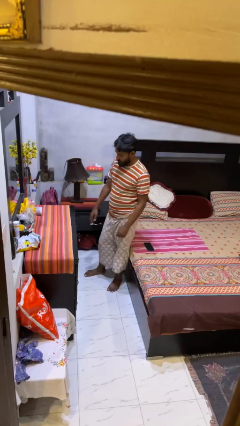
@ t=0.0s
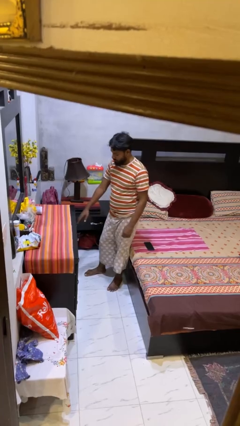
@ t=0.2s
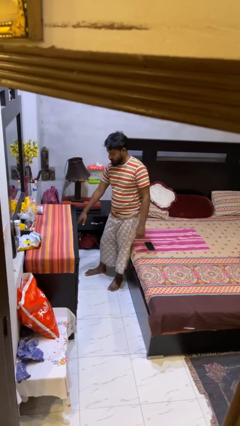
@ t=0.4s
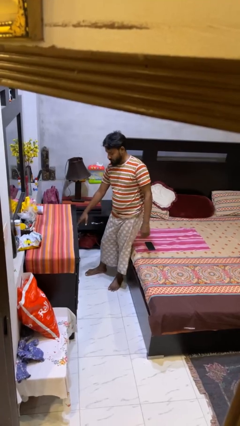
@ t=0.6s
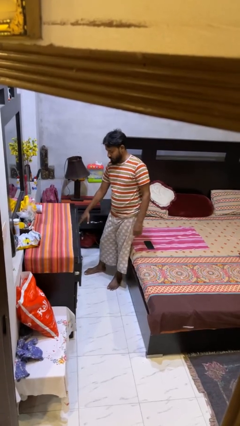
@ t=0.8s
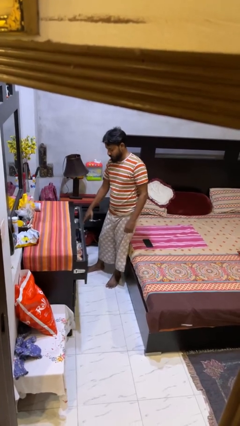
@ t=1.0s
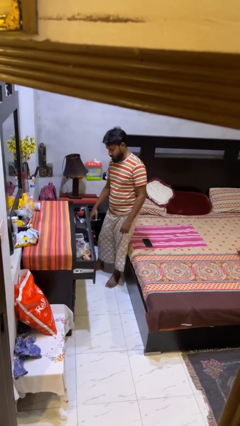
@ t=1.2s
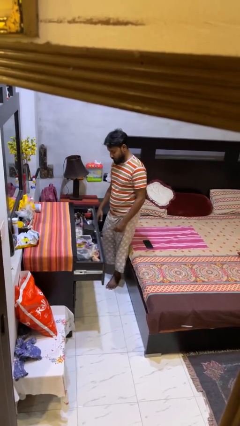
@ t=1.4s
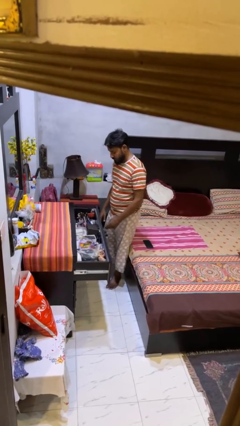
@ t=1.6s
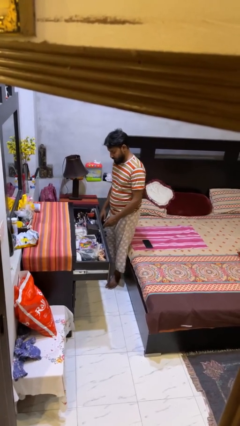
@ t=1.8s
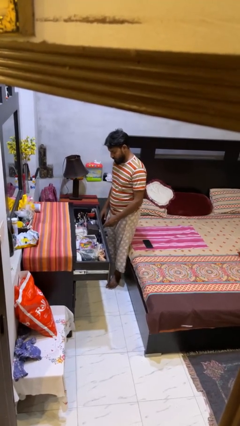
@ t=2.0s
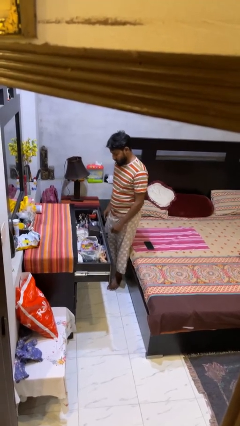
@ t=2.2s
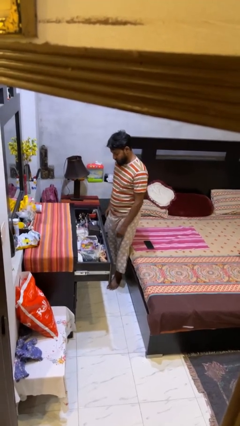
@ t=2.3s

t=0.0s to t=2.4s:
person opens dresser drawer

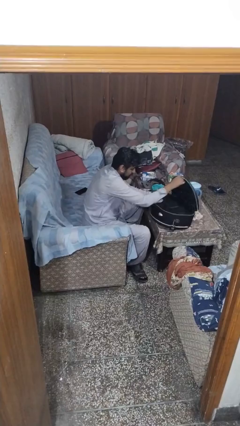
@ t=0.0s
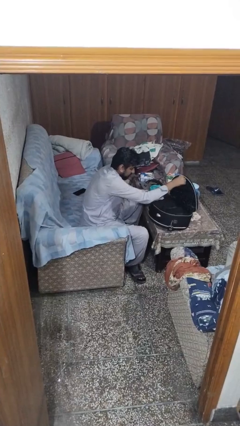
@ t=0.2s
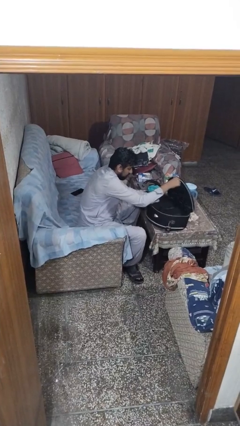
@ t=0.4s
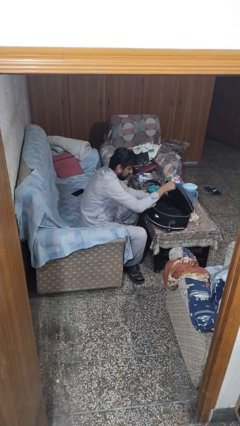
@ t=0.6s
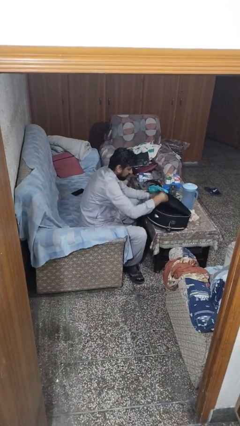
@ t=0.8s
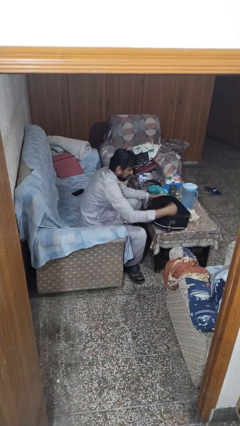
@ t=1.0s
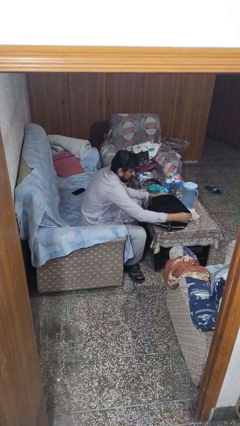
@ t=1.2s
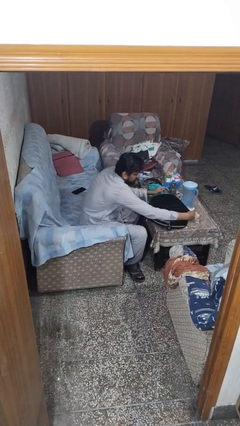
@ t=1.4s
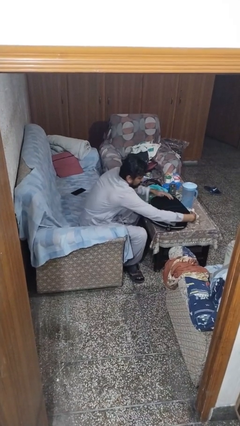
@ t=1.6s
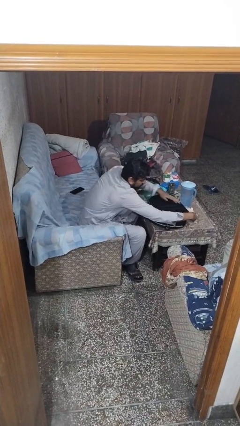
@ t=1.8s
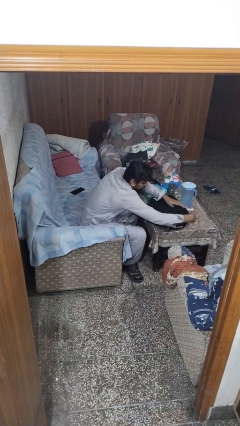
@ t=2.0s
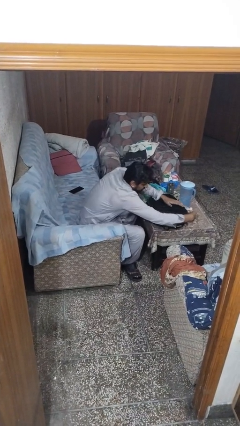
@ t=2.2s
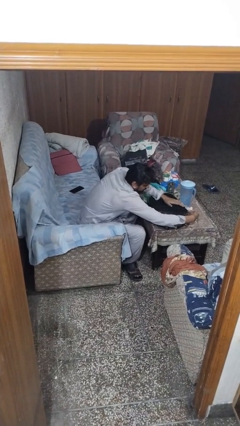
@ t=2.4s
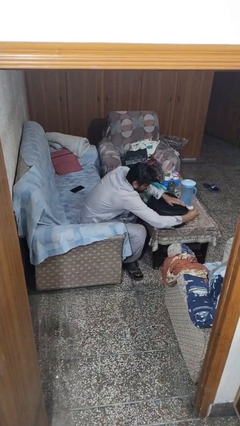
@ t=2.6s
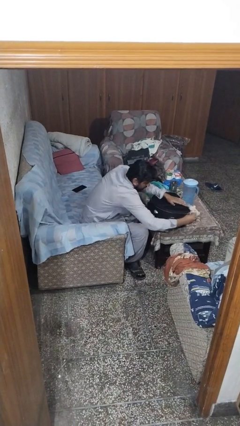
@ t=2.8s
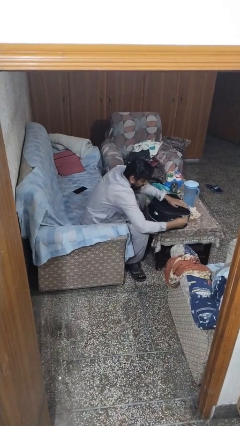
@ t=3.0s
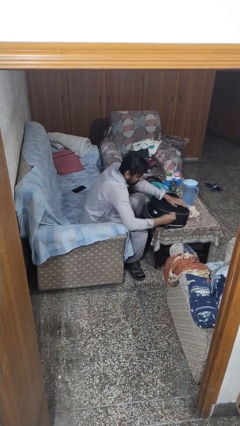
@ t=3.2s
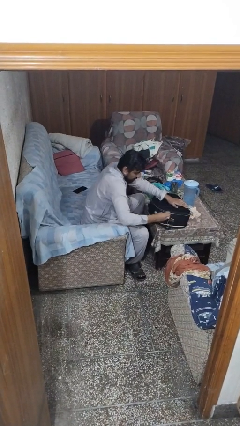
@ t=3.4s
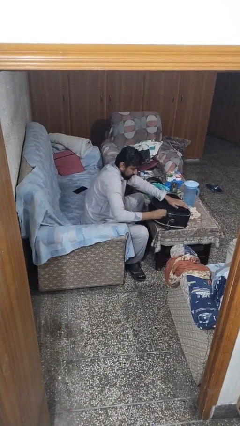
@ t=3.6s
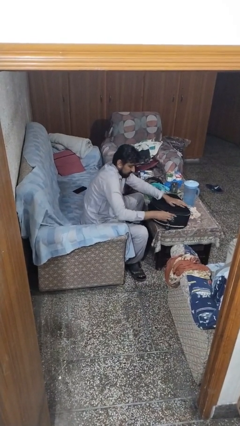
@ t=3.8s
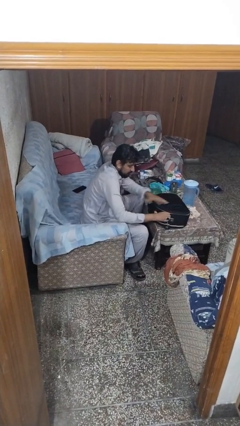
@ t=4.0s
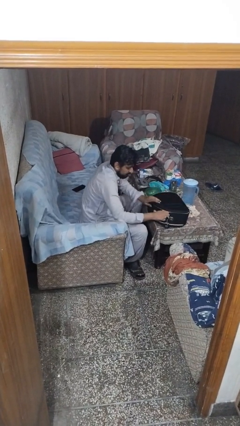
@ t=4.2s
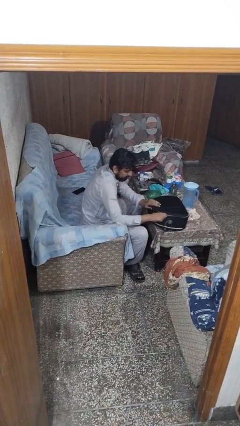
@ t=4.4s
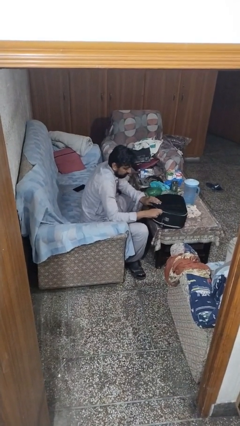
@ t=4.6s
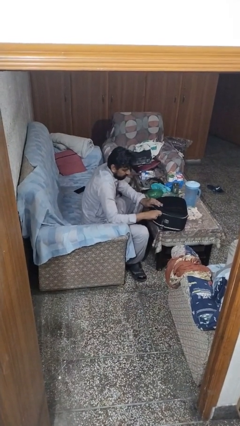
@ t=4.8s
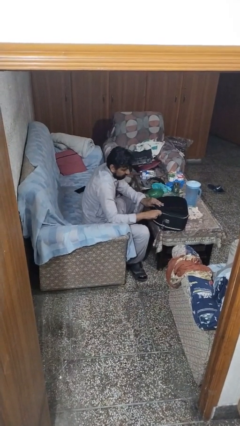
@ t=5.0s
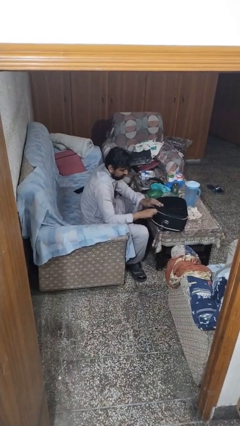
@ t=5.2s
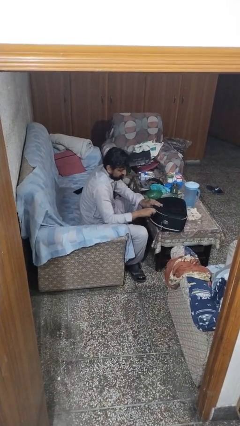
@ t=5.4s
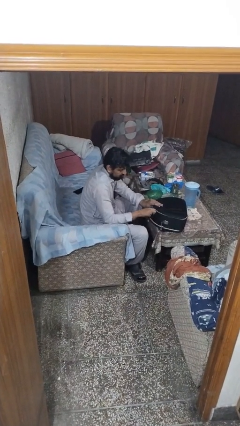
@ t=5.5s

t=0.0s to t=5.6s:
person closes suitcase

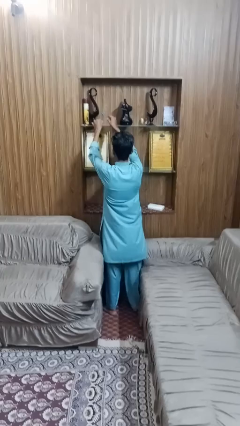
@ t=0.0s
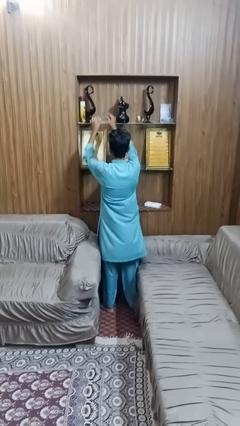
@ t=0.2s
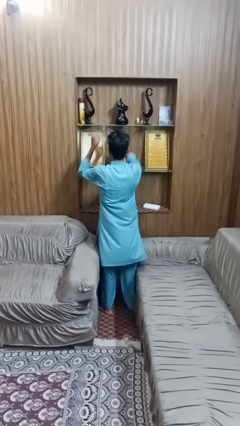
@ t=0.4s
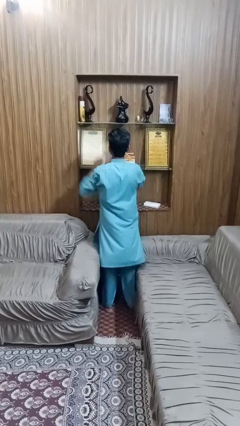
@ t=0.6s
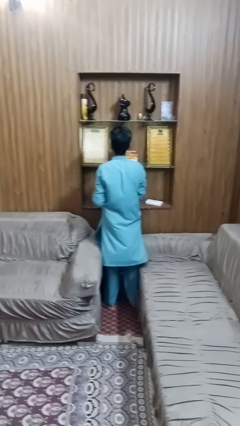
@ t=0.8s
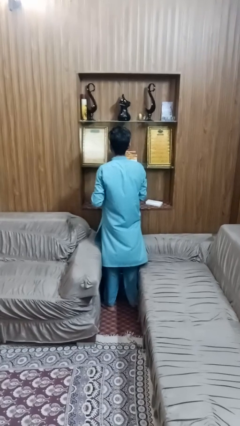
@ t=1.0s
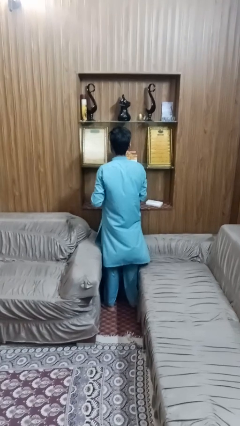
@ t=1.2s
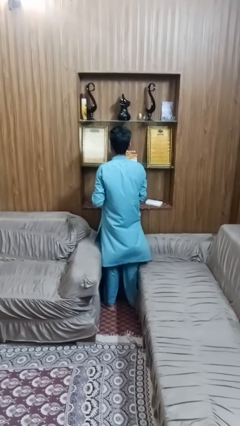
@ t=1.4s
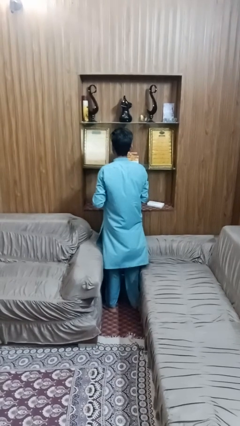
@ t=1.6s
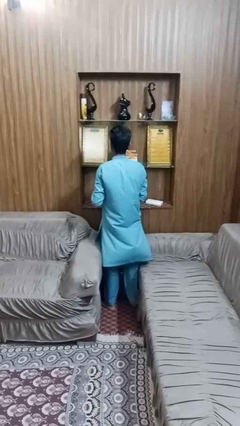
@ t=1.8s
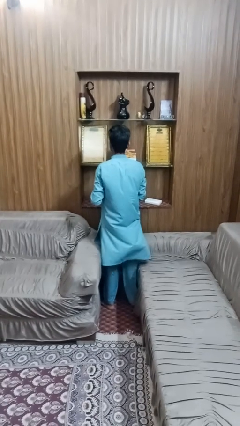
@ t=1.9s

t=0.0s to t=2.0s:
person picks up object from shelf

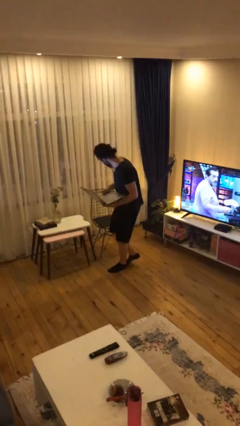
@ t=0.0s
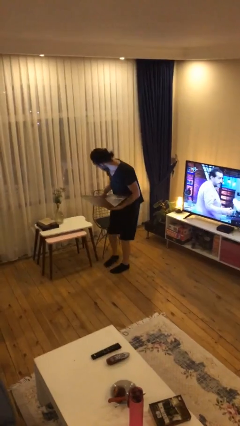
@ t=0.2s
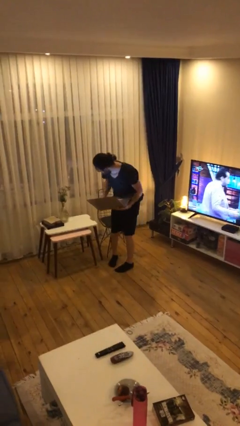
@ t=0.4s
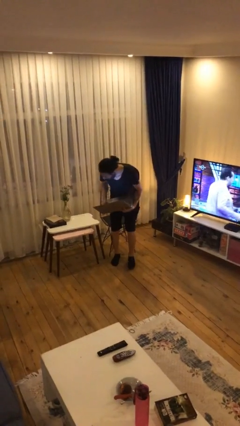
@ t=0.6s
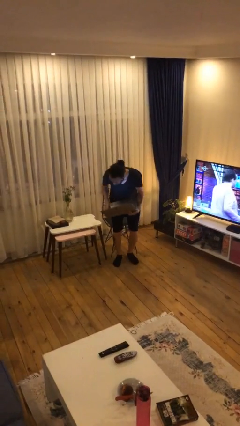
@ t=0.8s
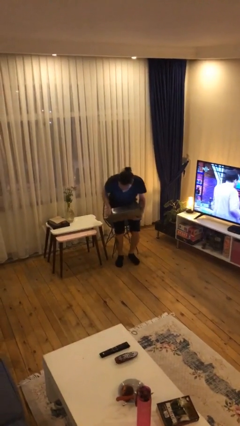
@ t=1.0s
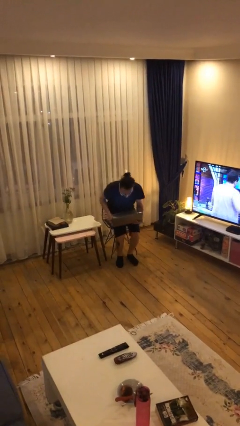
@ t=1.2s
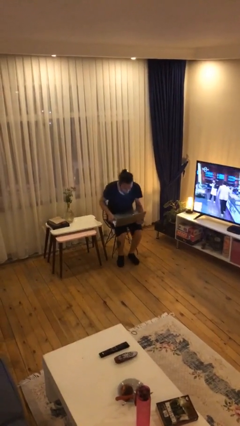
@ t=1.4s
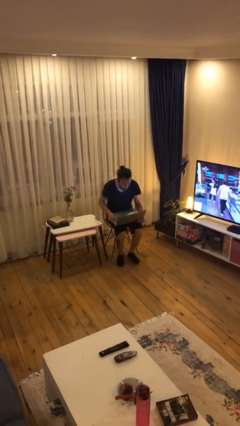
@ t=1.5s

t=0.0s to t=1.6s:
person sits down

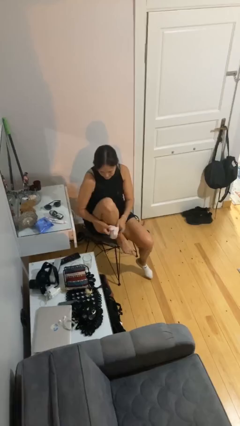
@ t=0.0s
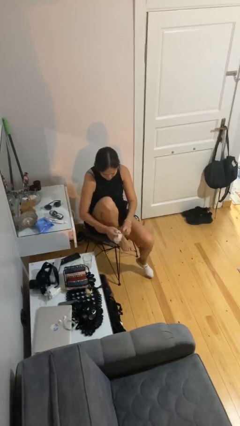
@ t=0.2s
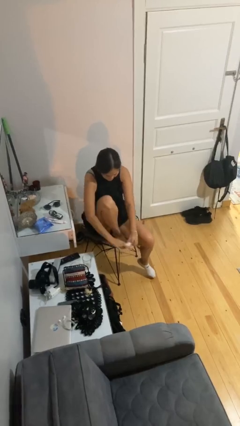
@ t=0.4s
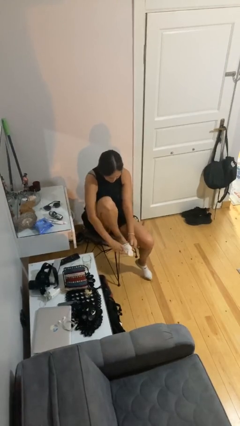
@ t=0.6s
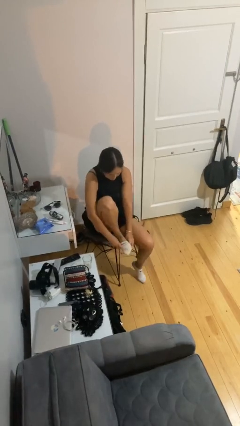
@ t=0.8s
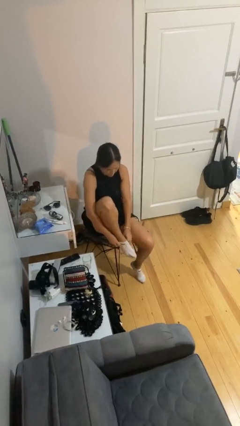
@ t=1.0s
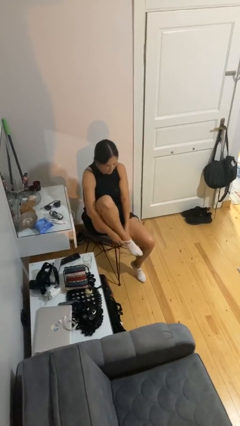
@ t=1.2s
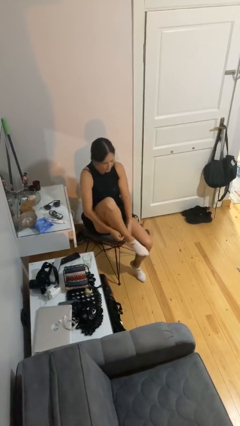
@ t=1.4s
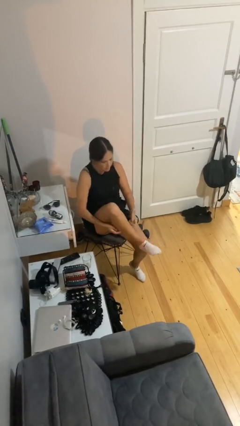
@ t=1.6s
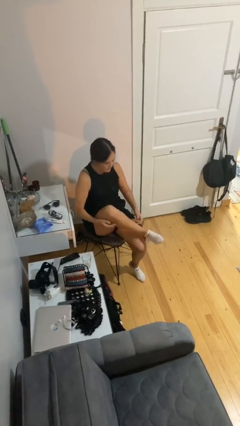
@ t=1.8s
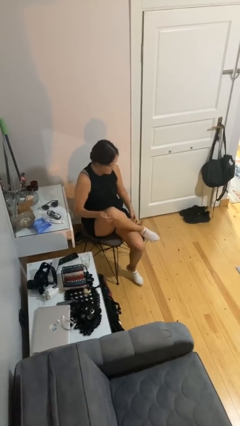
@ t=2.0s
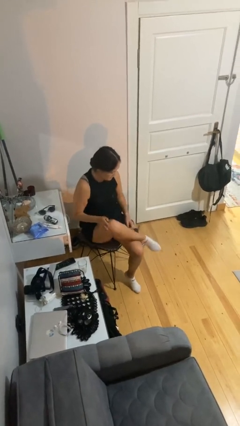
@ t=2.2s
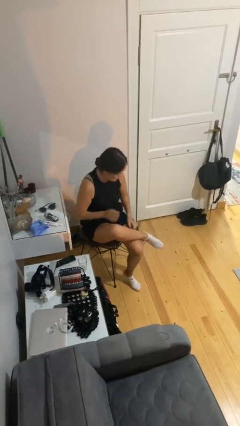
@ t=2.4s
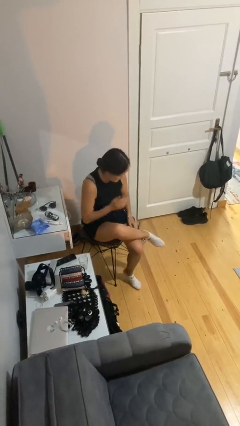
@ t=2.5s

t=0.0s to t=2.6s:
person puts on socks

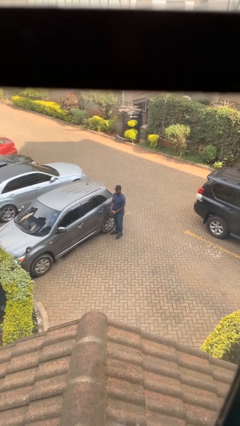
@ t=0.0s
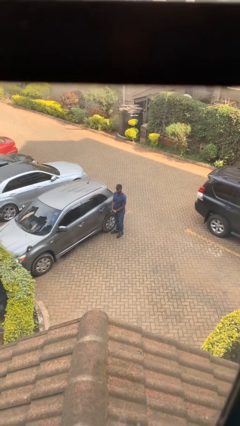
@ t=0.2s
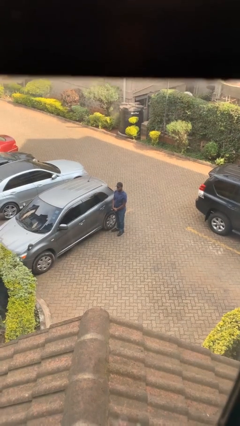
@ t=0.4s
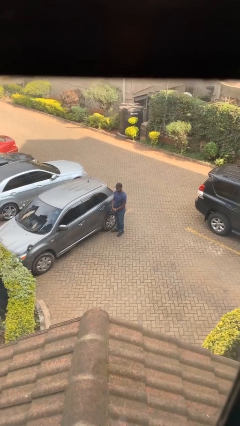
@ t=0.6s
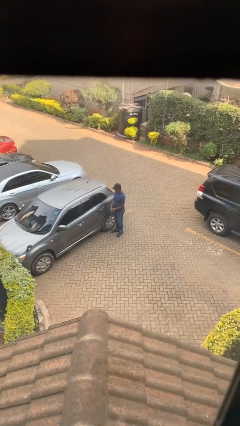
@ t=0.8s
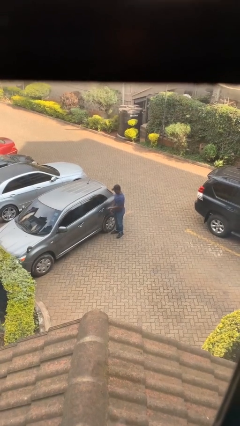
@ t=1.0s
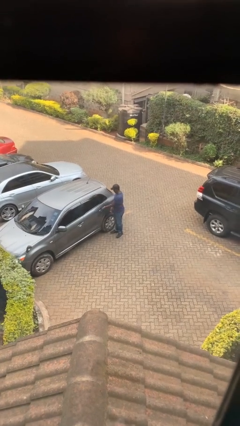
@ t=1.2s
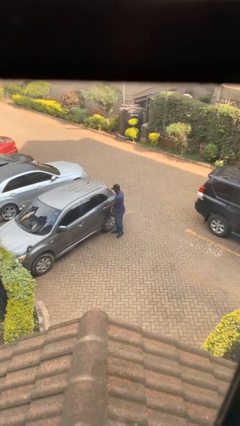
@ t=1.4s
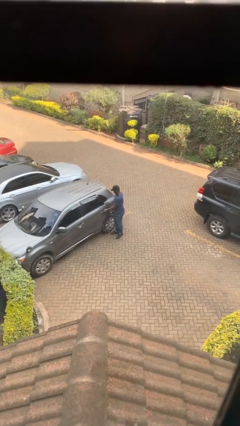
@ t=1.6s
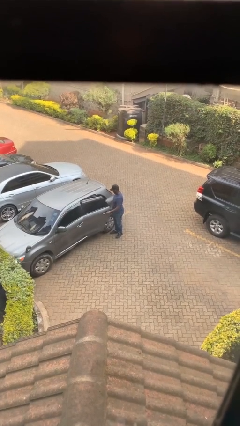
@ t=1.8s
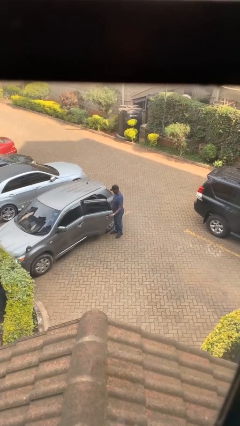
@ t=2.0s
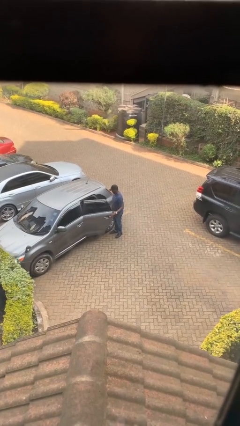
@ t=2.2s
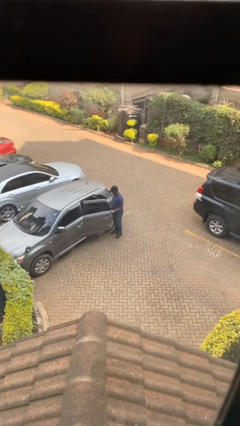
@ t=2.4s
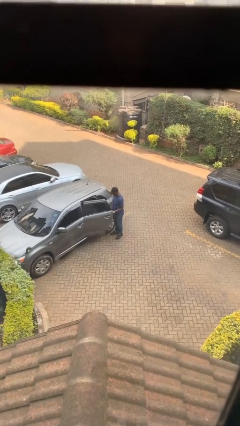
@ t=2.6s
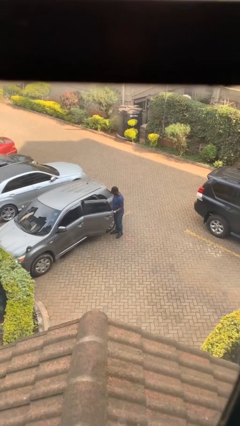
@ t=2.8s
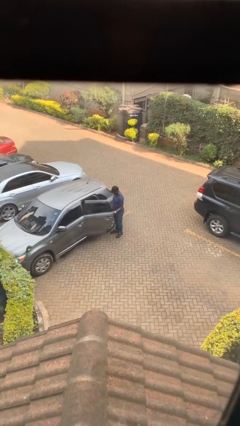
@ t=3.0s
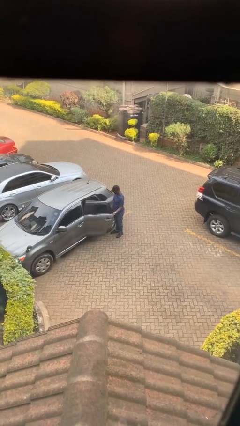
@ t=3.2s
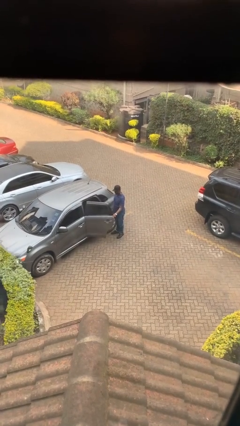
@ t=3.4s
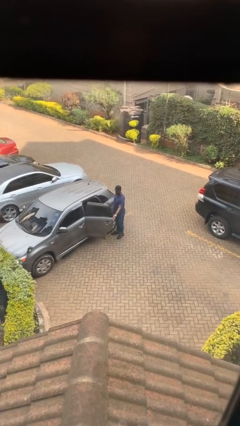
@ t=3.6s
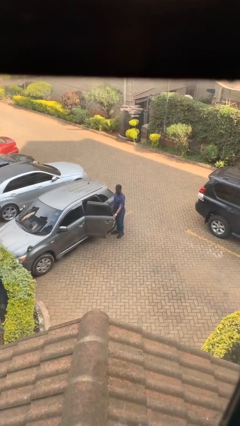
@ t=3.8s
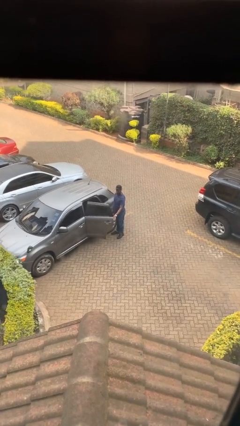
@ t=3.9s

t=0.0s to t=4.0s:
person opens car door
